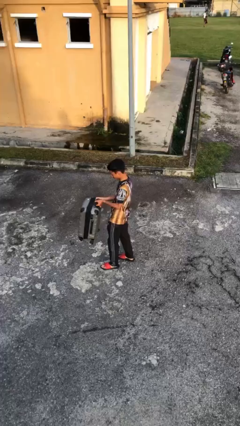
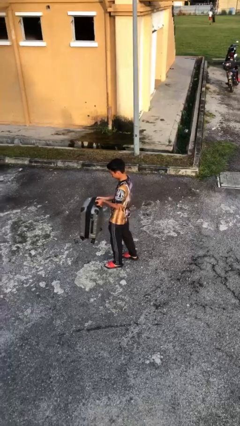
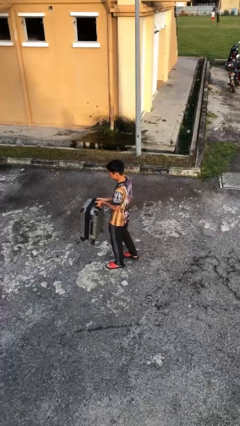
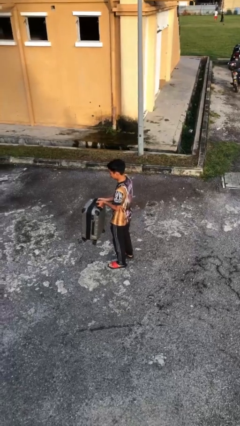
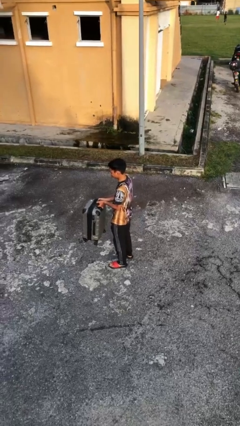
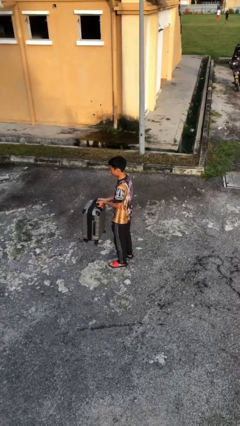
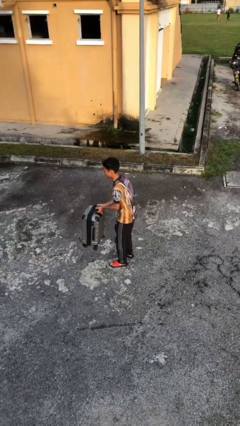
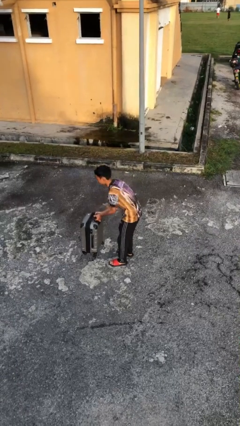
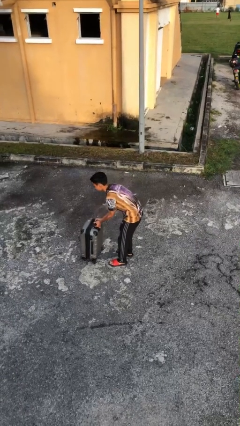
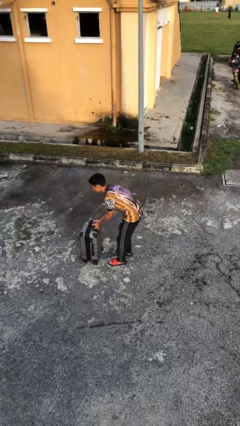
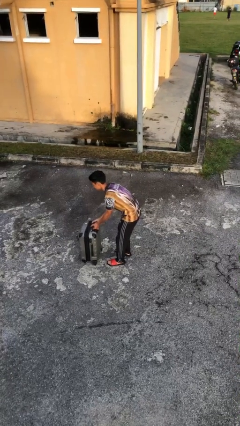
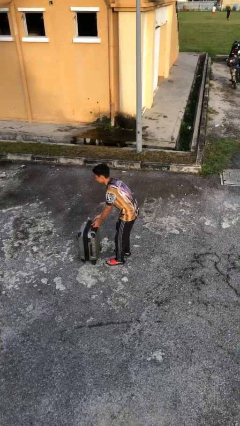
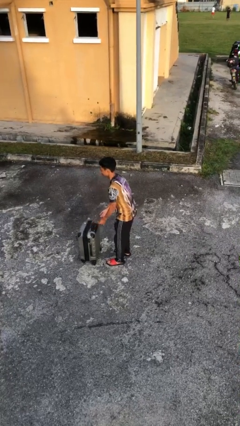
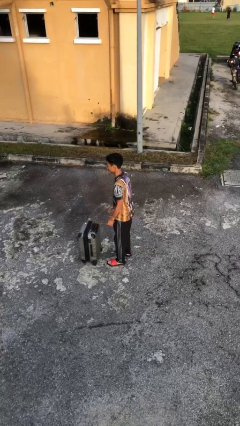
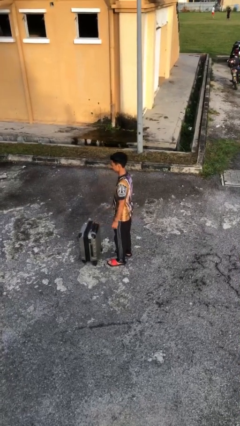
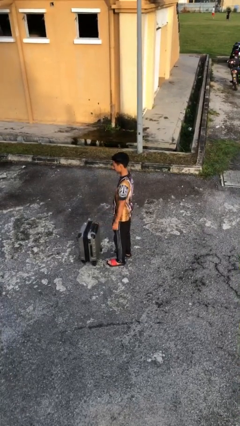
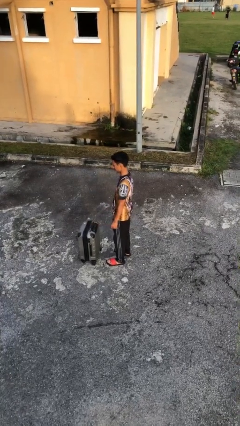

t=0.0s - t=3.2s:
person puts down object on floor

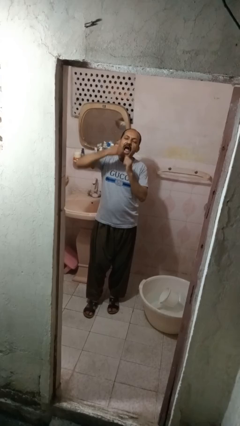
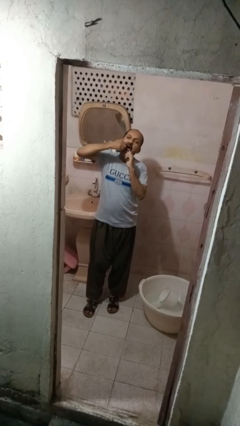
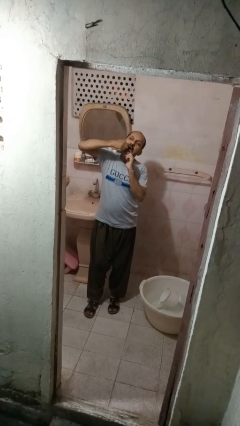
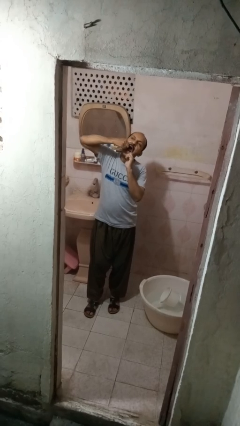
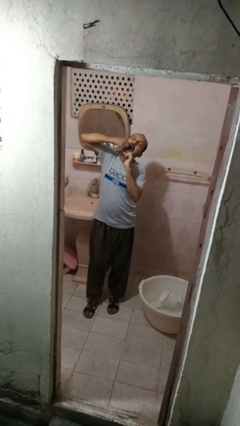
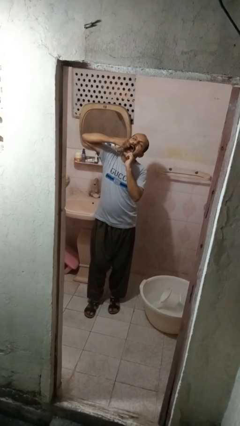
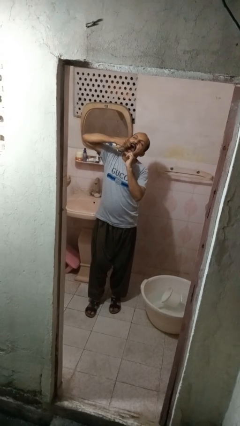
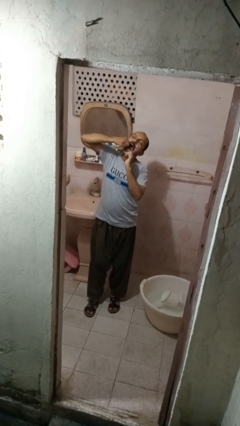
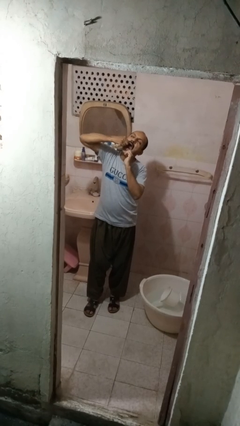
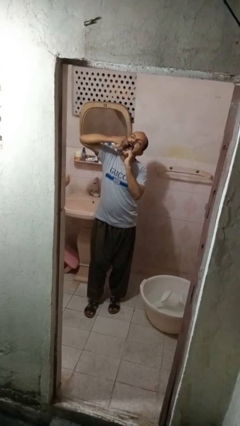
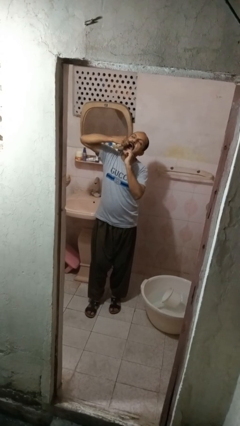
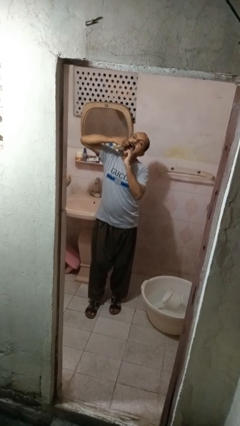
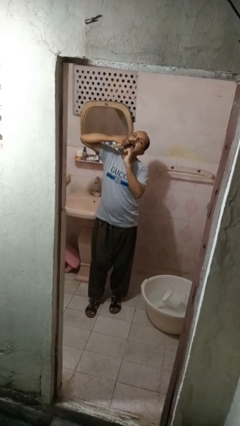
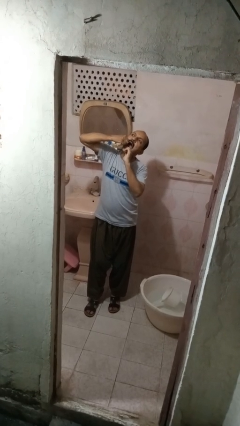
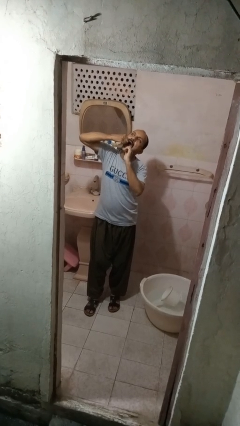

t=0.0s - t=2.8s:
person flosses

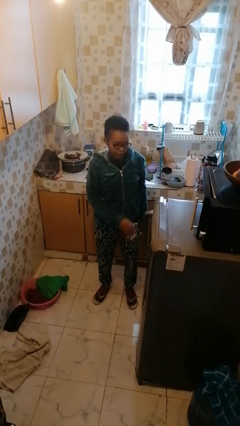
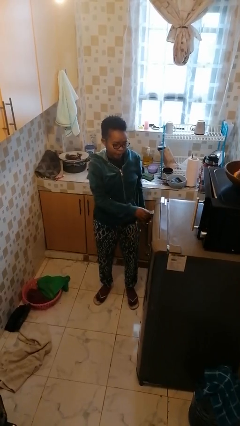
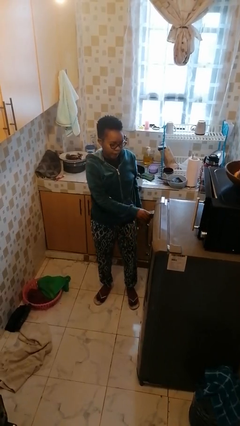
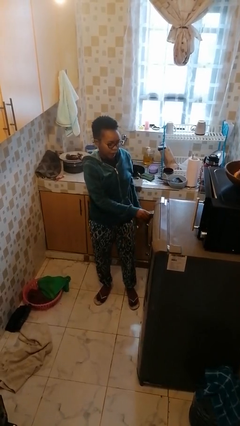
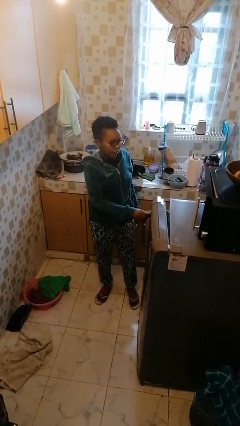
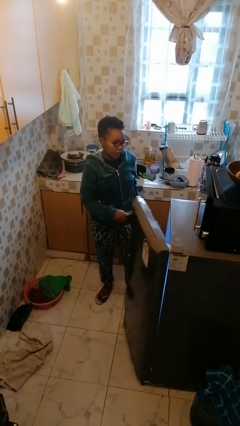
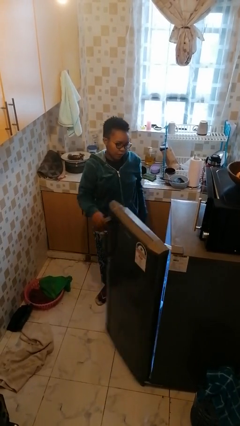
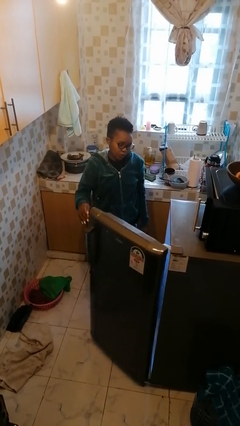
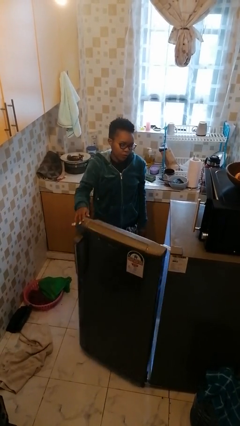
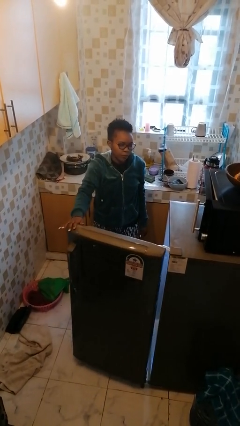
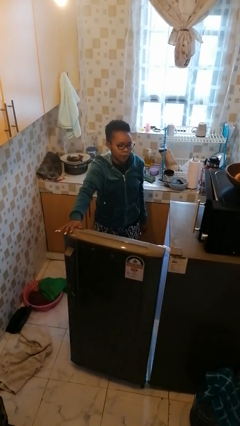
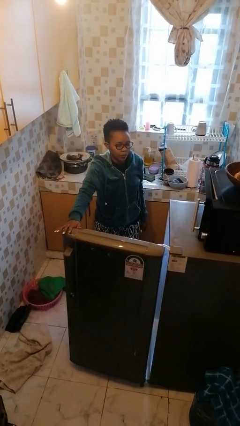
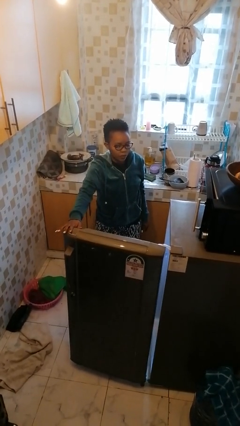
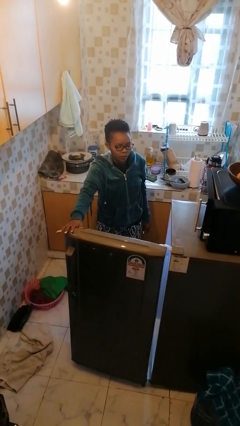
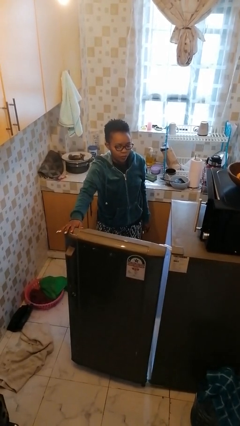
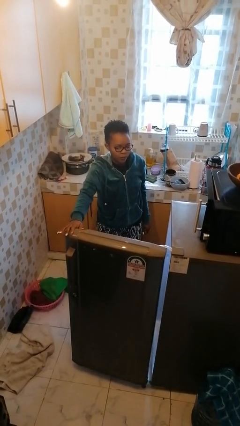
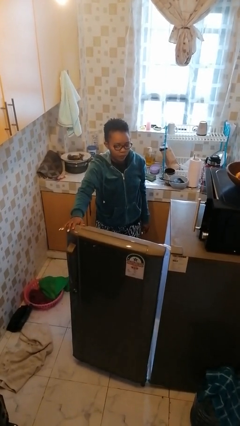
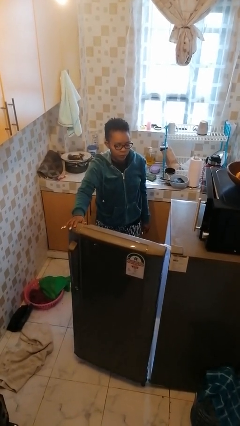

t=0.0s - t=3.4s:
person opens refrigerator

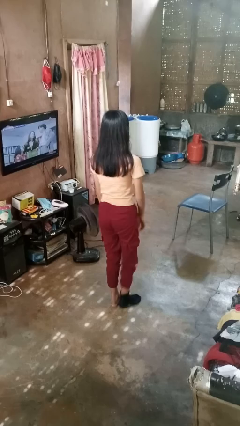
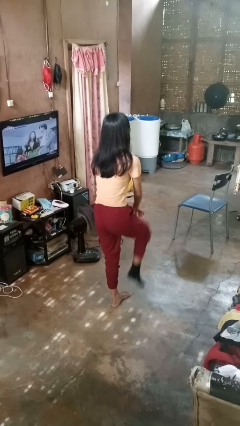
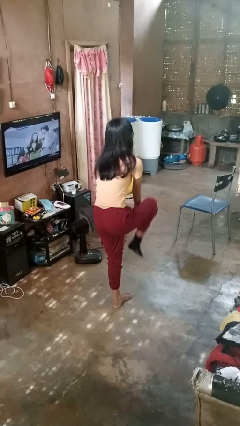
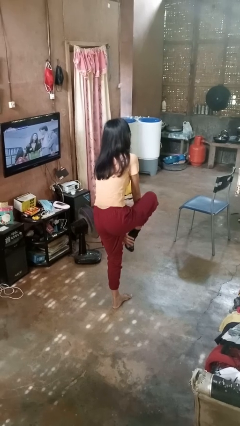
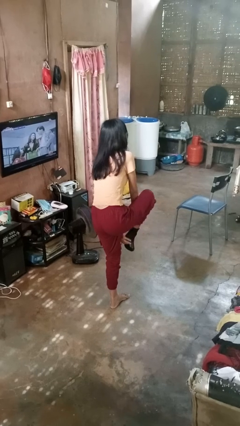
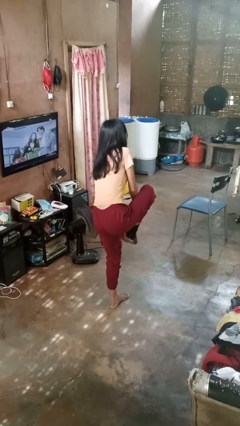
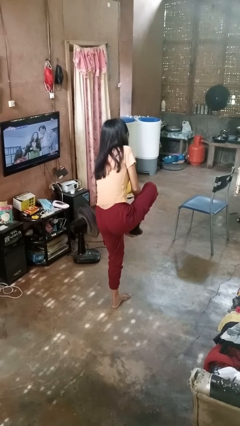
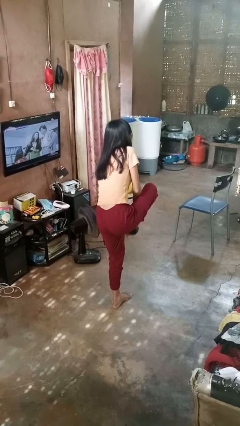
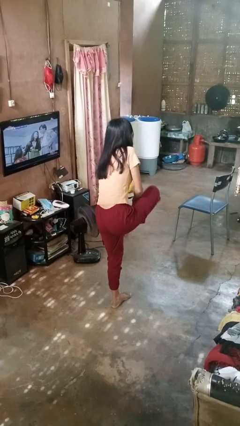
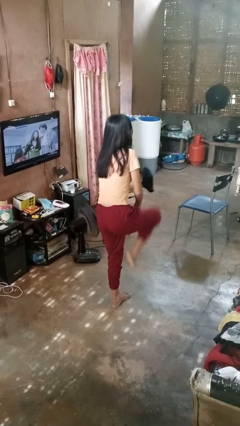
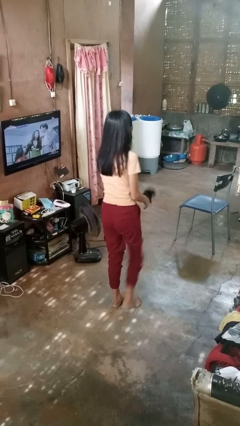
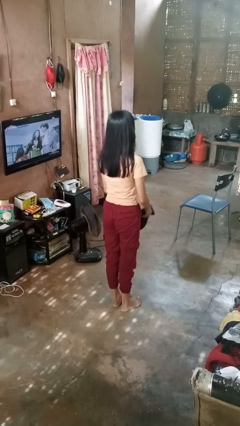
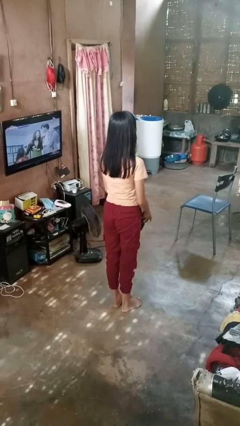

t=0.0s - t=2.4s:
person takes off socks

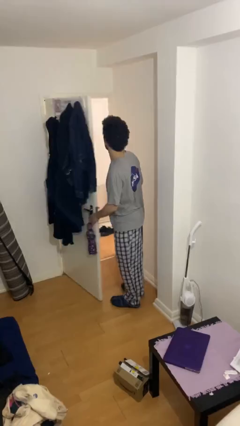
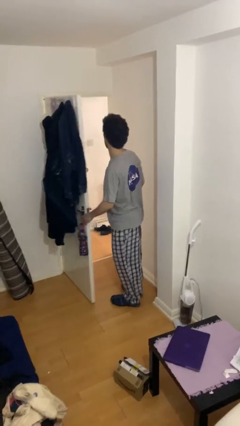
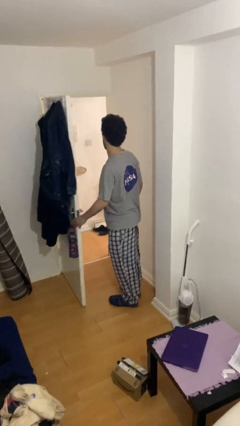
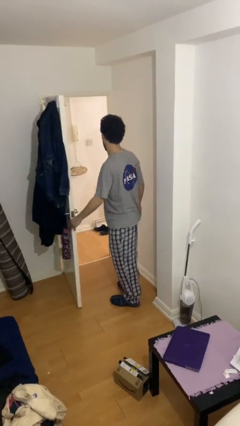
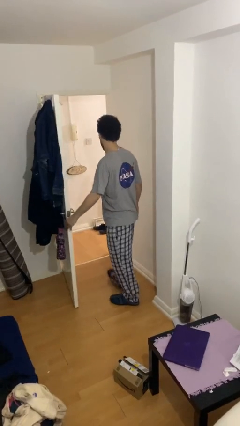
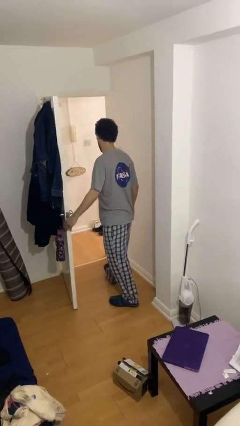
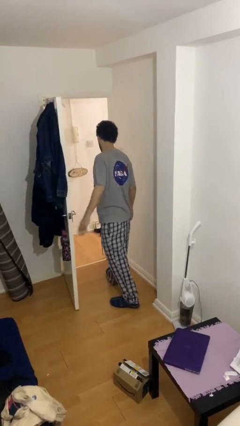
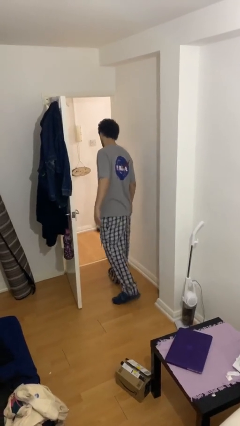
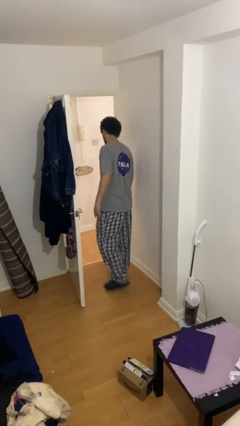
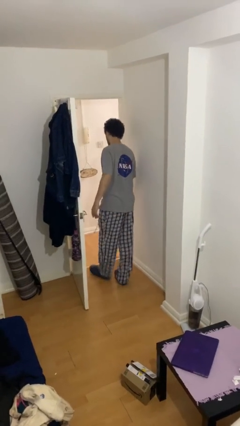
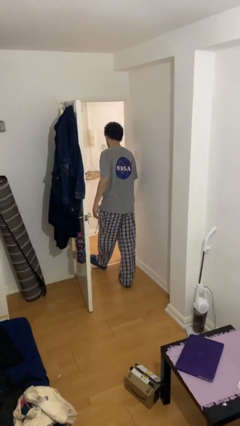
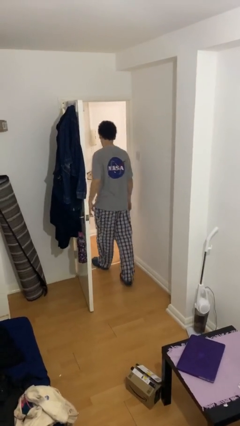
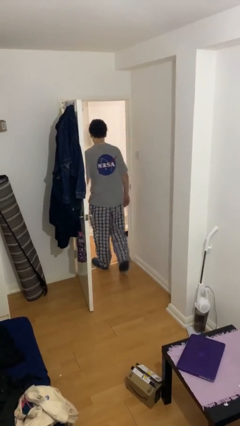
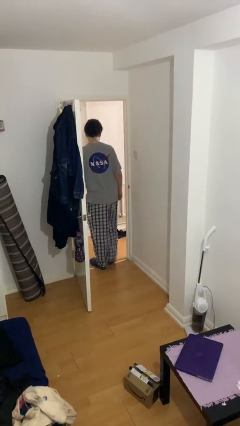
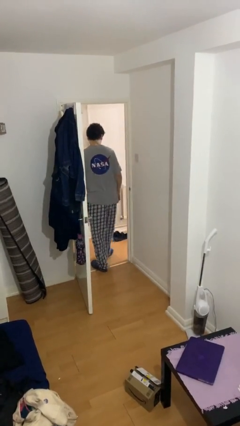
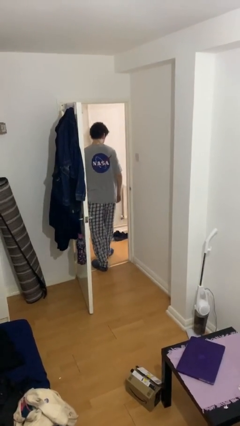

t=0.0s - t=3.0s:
person exits scene through structure

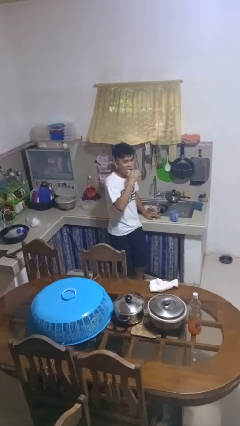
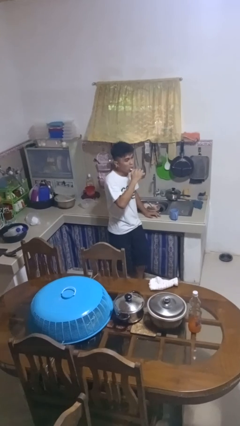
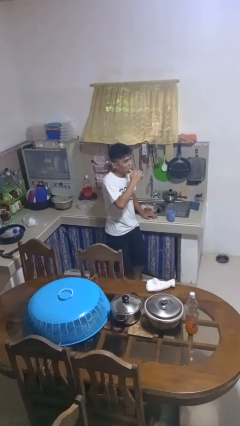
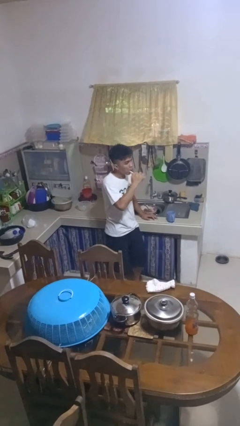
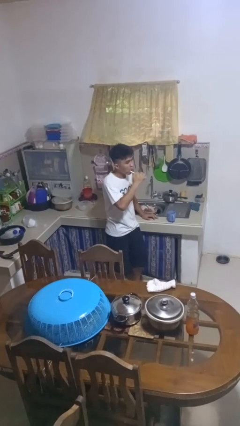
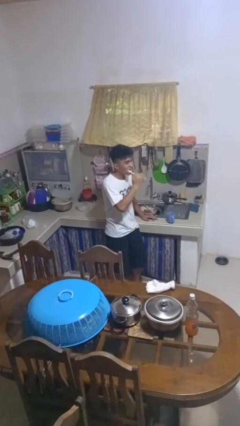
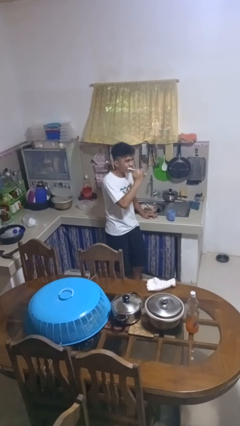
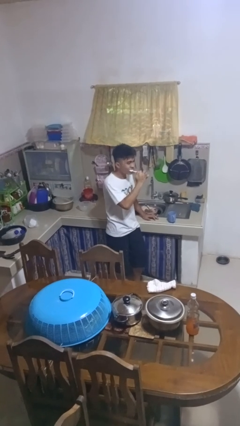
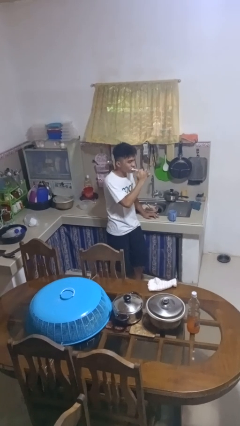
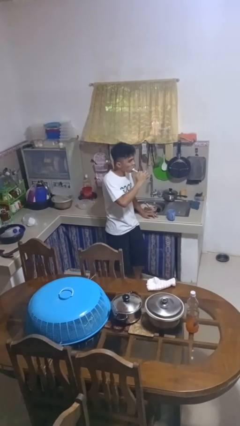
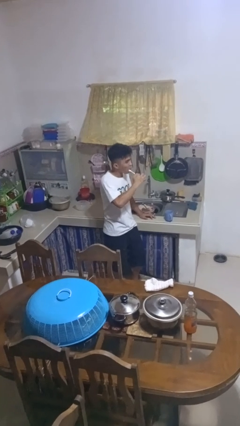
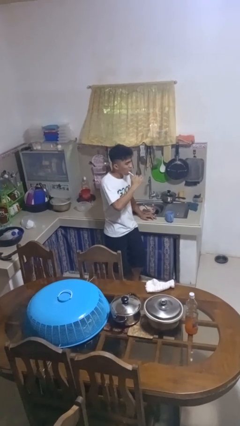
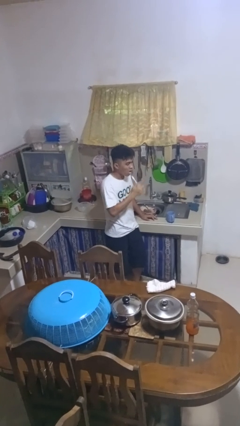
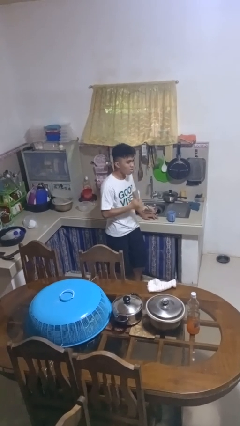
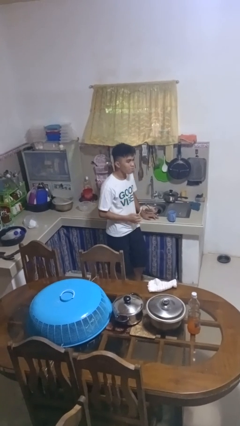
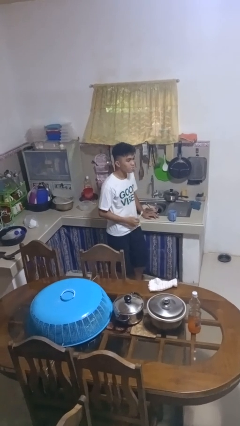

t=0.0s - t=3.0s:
person brushes teeth
